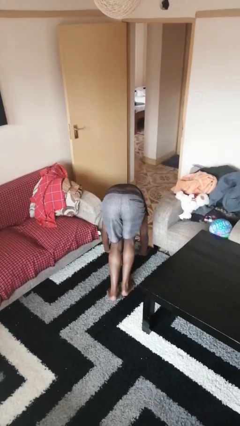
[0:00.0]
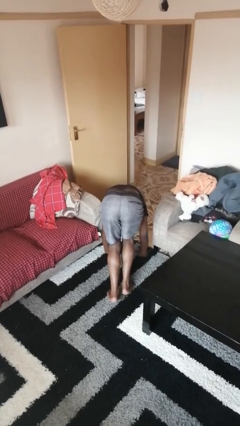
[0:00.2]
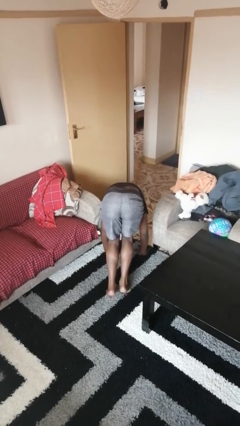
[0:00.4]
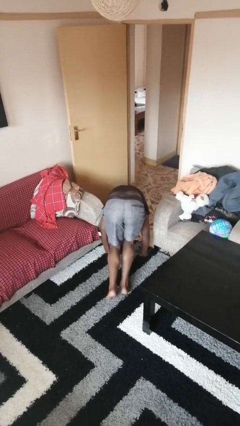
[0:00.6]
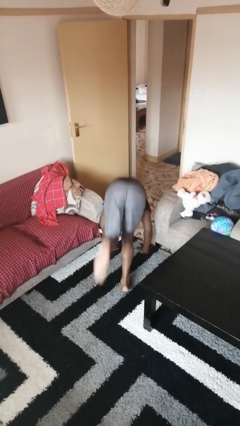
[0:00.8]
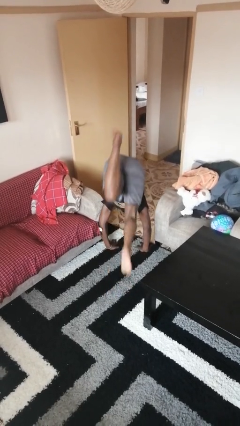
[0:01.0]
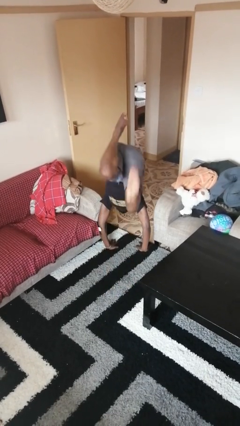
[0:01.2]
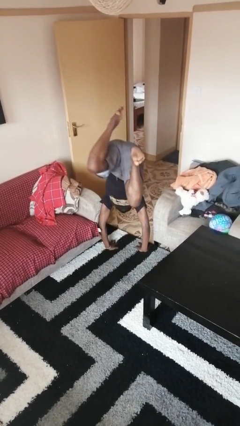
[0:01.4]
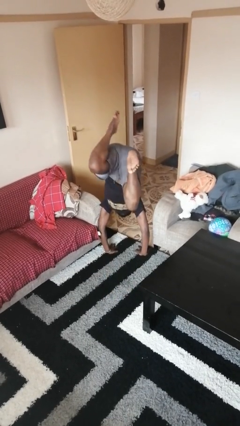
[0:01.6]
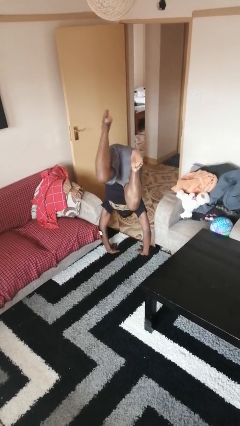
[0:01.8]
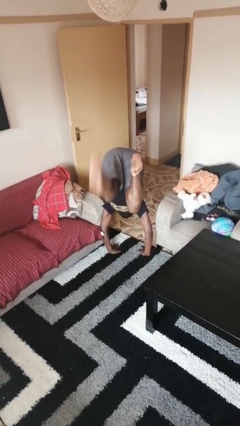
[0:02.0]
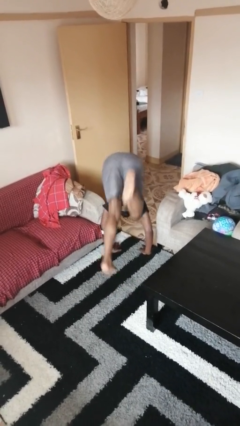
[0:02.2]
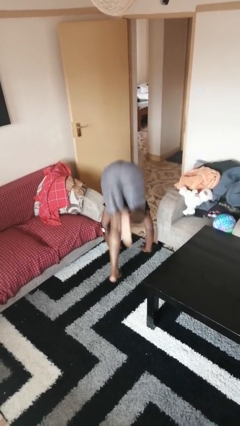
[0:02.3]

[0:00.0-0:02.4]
person handstand

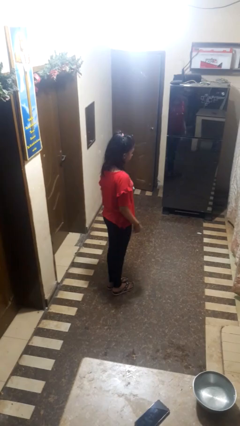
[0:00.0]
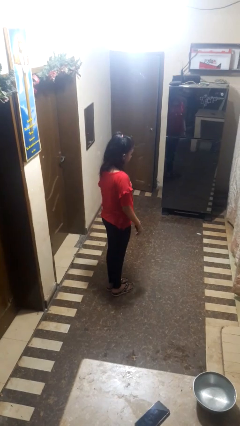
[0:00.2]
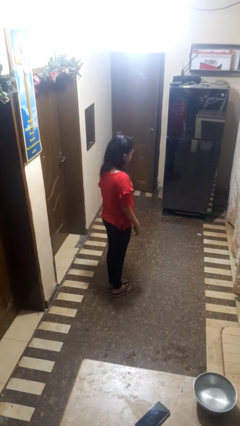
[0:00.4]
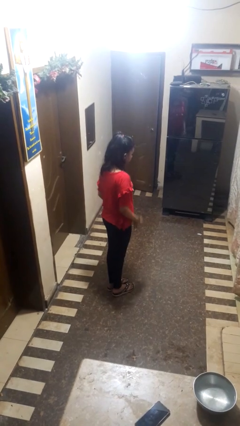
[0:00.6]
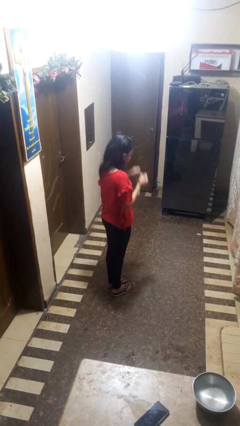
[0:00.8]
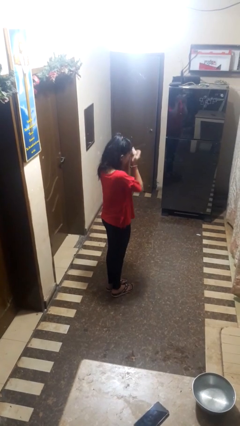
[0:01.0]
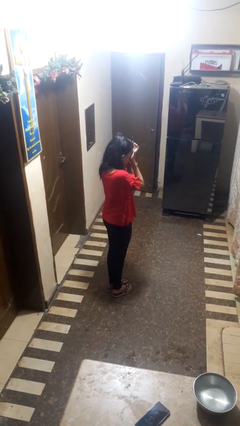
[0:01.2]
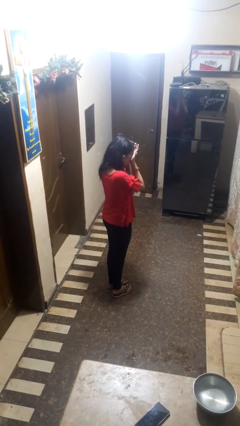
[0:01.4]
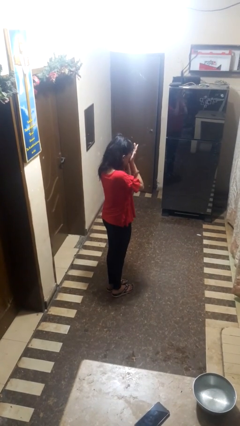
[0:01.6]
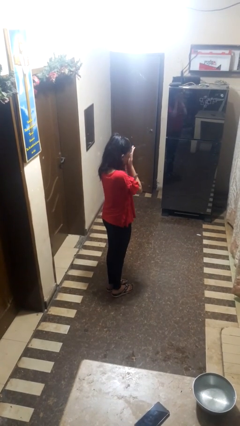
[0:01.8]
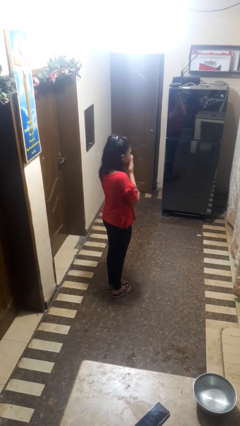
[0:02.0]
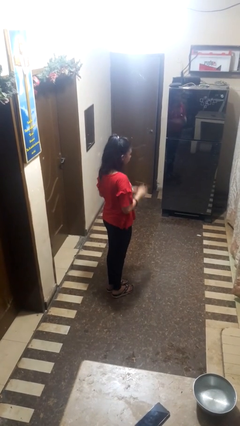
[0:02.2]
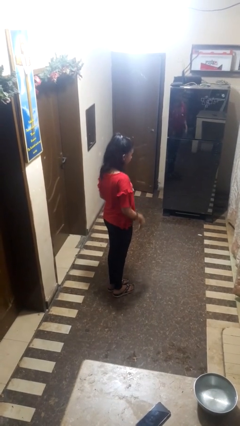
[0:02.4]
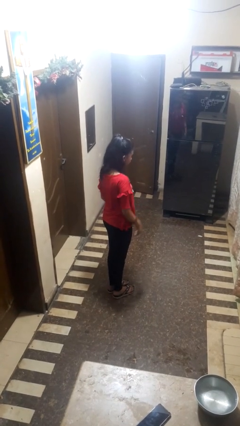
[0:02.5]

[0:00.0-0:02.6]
person rubs eyes

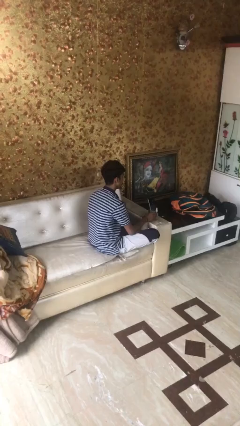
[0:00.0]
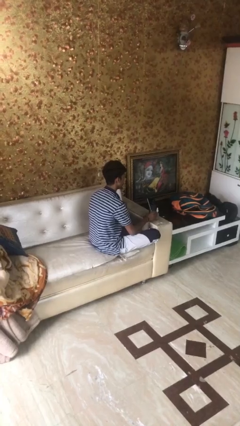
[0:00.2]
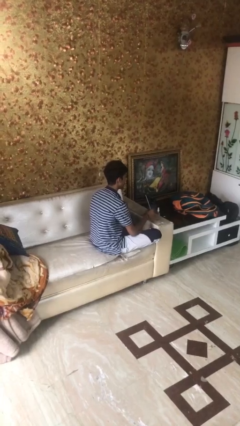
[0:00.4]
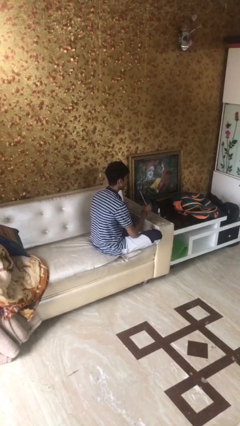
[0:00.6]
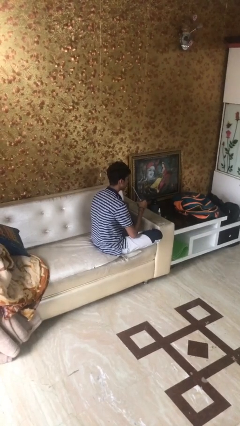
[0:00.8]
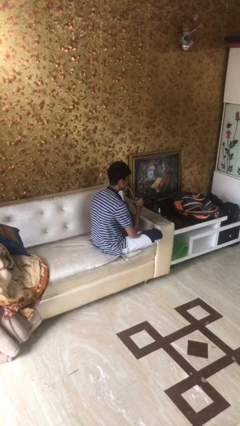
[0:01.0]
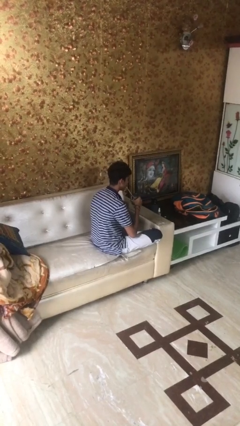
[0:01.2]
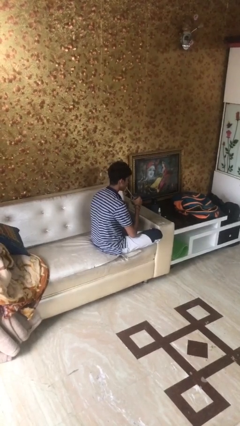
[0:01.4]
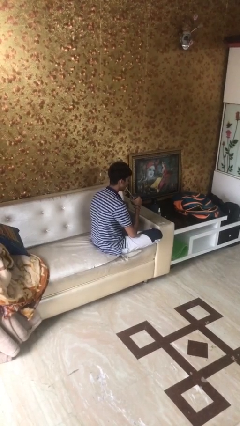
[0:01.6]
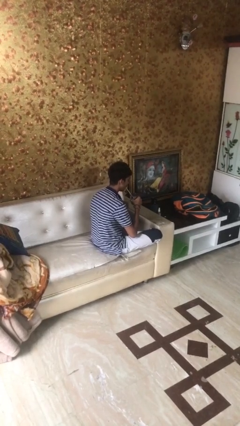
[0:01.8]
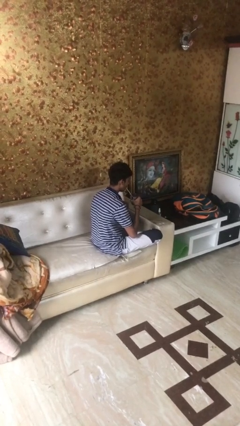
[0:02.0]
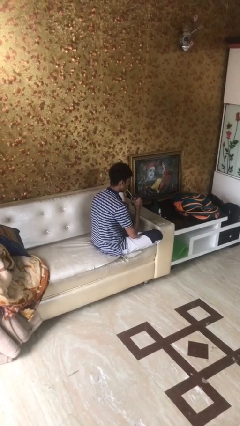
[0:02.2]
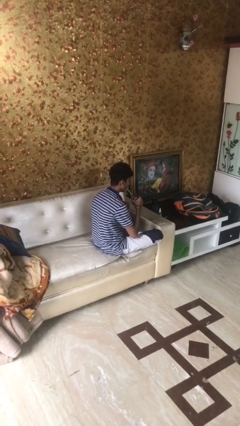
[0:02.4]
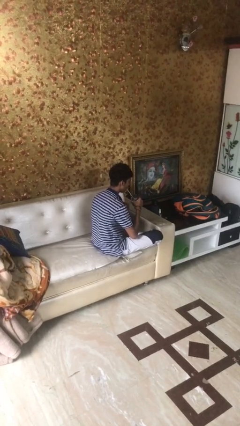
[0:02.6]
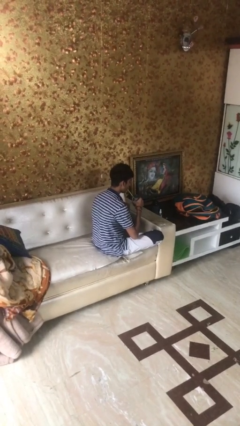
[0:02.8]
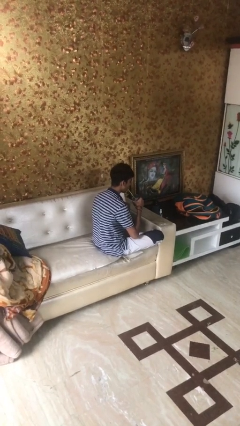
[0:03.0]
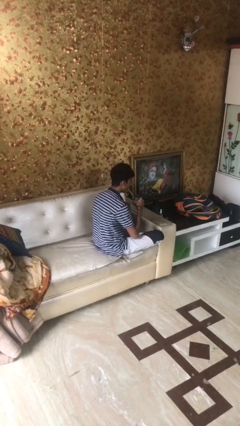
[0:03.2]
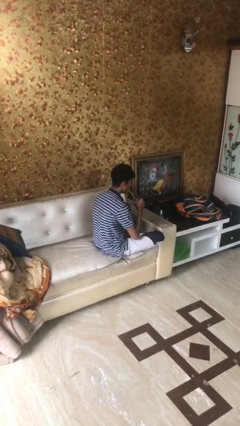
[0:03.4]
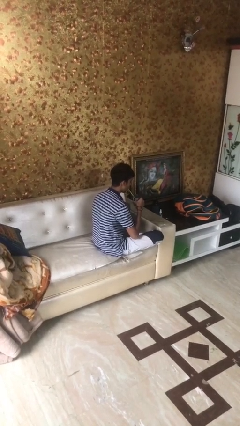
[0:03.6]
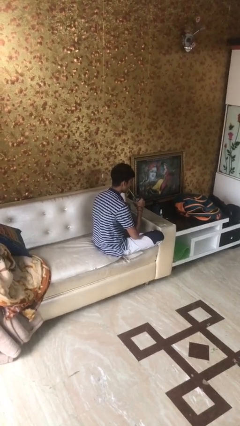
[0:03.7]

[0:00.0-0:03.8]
person drinks from straw

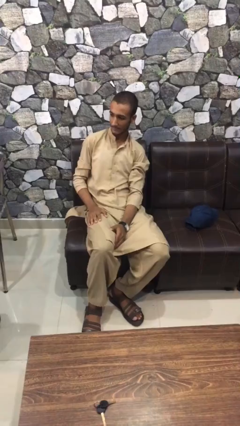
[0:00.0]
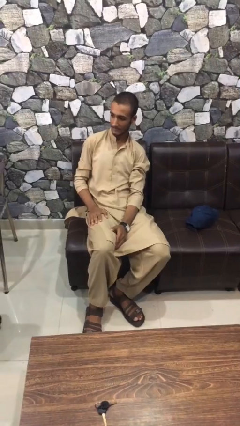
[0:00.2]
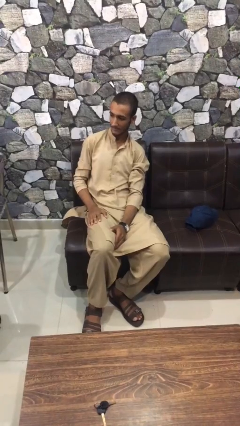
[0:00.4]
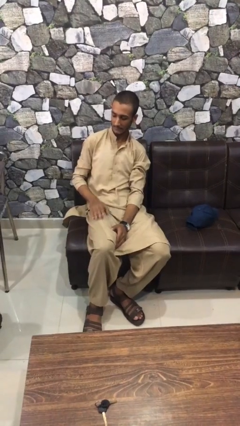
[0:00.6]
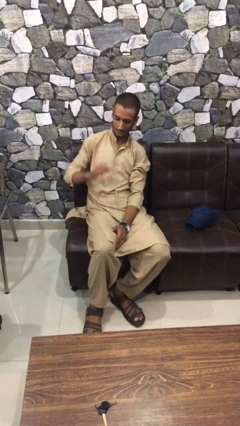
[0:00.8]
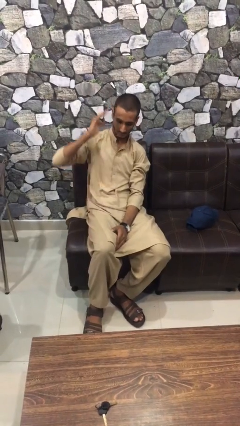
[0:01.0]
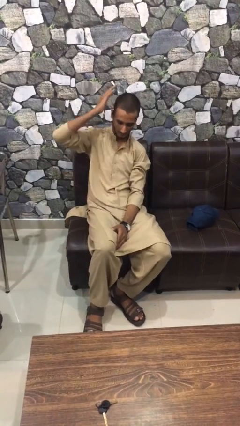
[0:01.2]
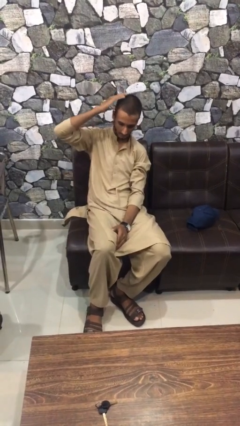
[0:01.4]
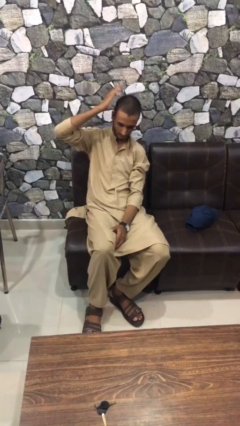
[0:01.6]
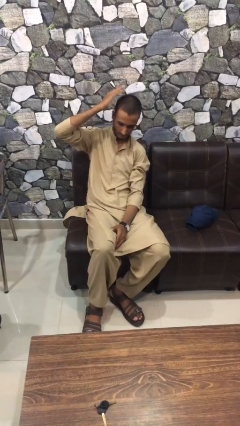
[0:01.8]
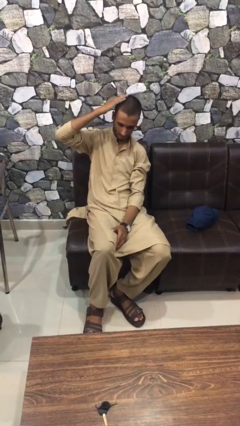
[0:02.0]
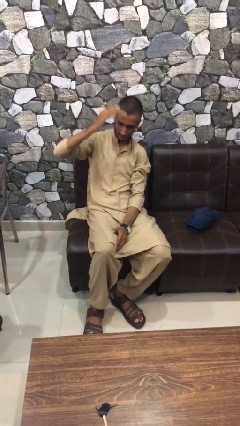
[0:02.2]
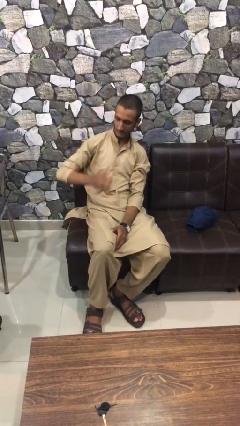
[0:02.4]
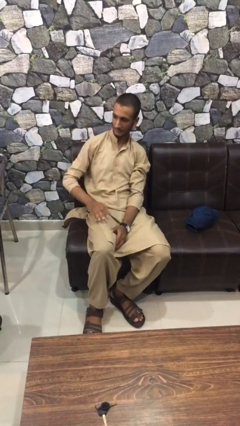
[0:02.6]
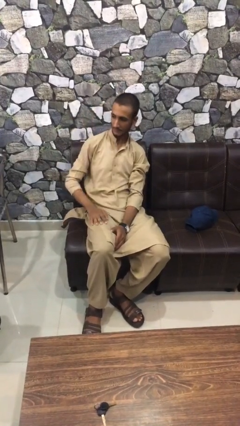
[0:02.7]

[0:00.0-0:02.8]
person pats head

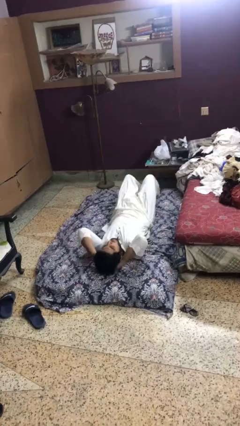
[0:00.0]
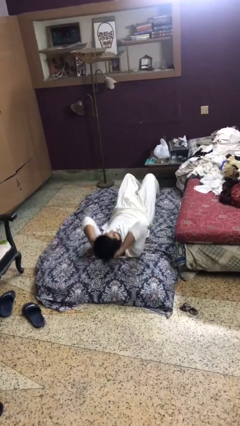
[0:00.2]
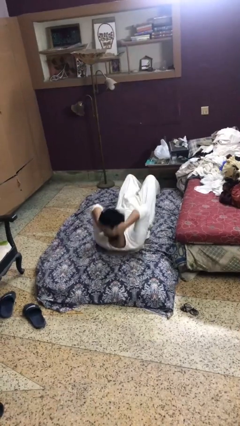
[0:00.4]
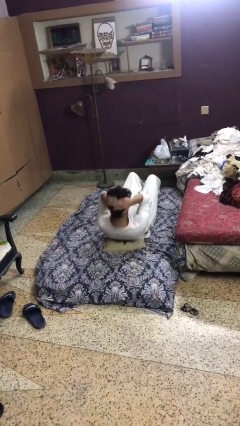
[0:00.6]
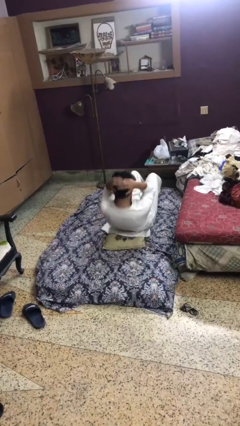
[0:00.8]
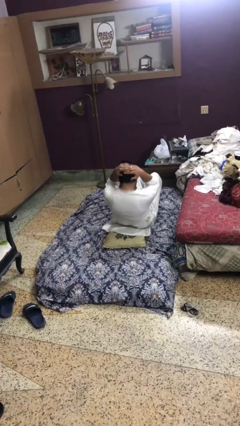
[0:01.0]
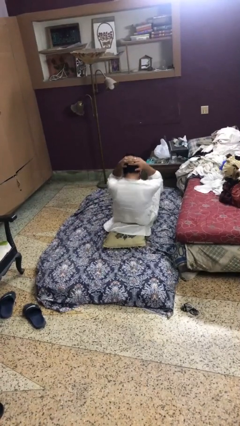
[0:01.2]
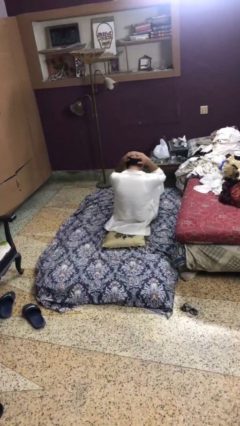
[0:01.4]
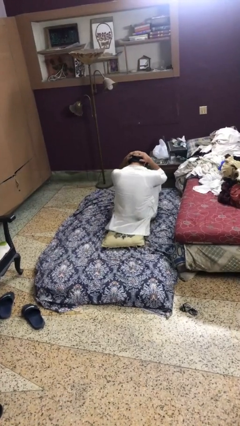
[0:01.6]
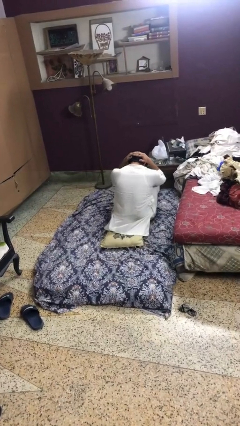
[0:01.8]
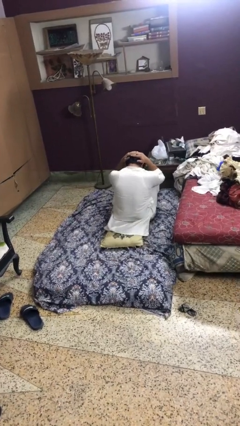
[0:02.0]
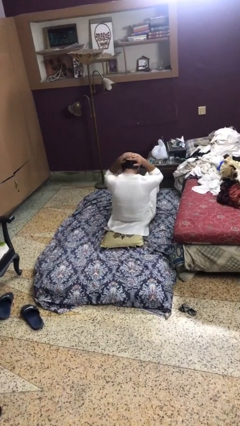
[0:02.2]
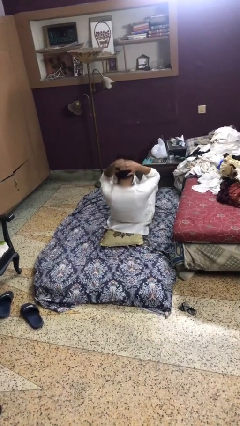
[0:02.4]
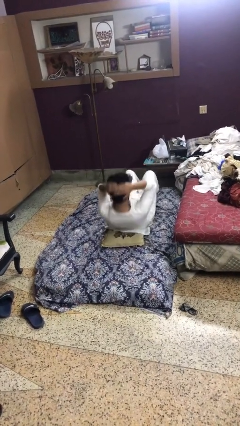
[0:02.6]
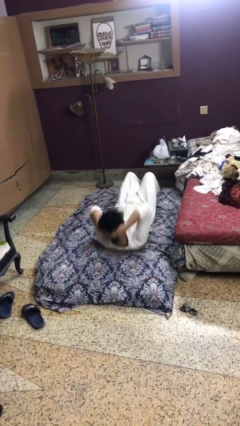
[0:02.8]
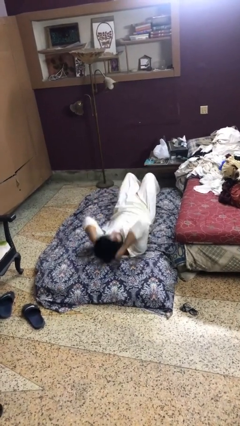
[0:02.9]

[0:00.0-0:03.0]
person exercises with situp

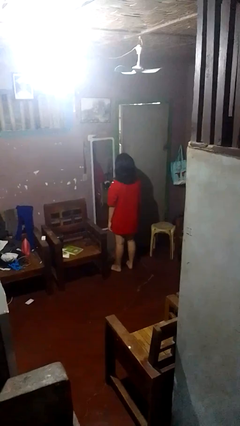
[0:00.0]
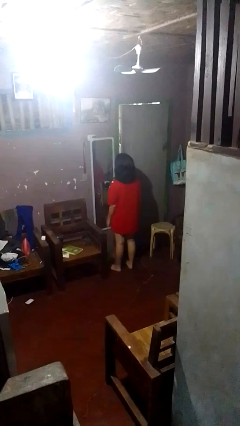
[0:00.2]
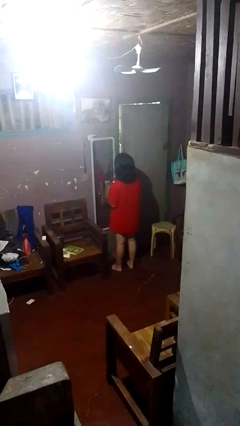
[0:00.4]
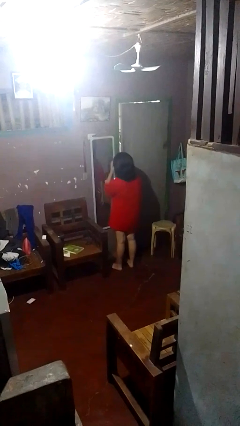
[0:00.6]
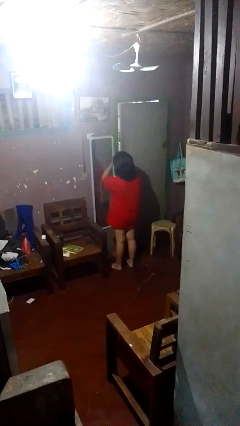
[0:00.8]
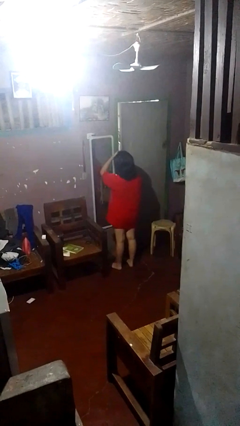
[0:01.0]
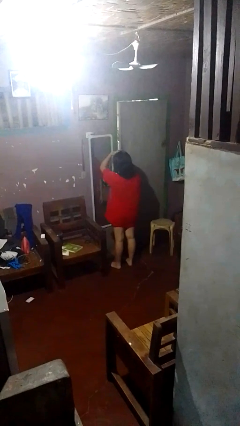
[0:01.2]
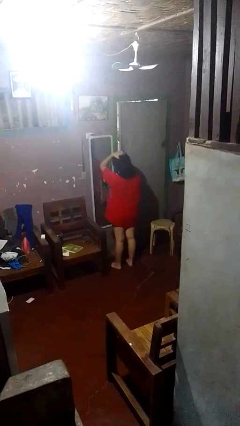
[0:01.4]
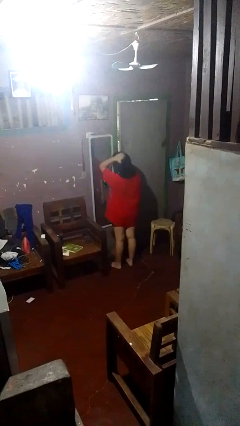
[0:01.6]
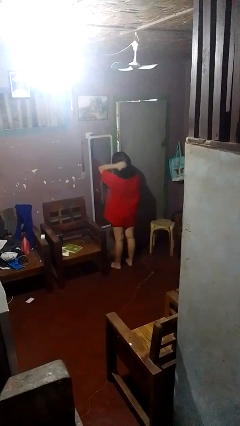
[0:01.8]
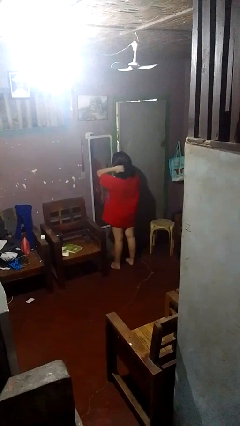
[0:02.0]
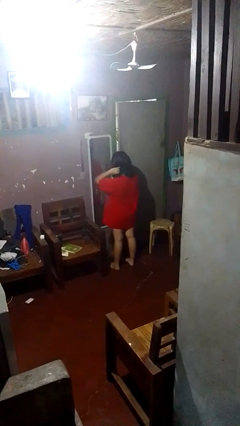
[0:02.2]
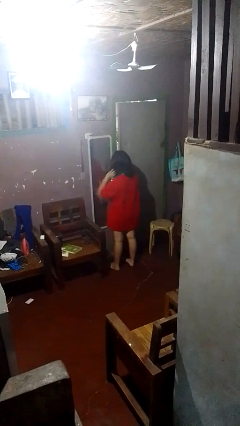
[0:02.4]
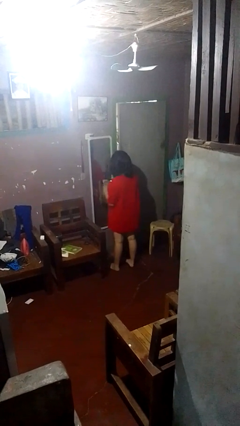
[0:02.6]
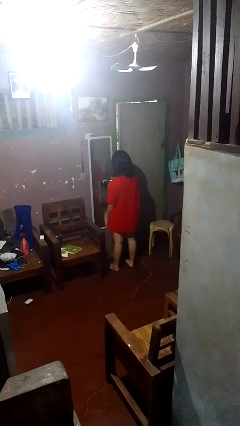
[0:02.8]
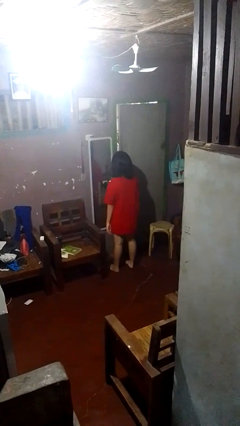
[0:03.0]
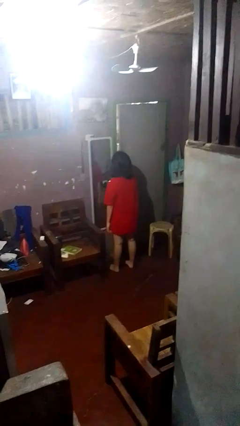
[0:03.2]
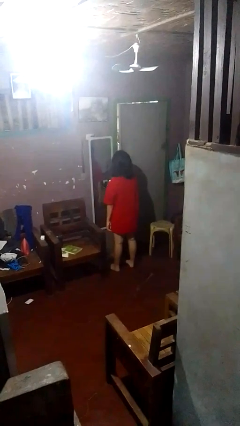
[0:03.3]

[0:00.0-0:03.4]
person strokes hair
